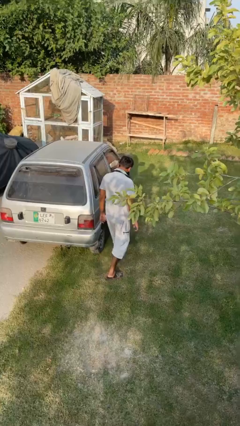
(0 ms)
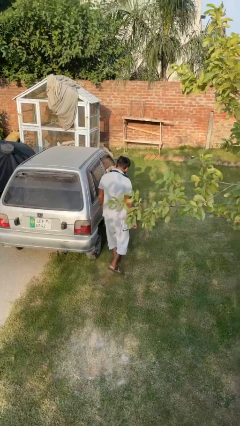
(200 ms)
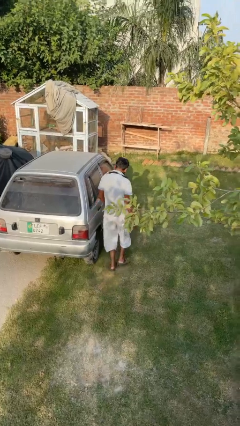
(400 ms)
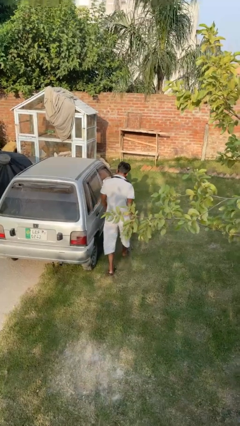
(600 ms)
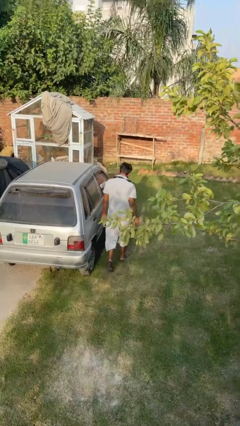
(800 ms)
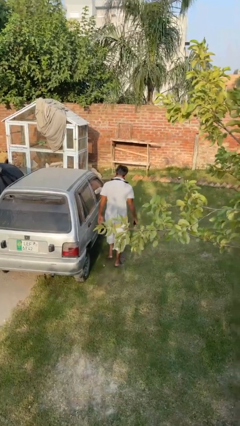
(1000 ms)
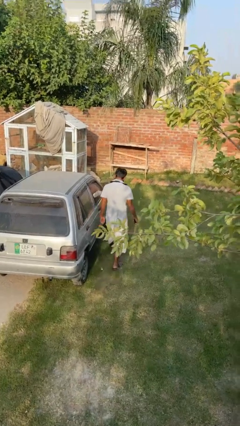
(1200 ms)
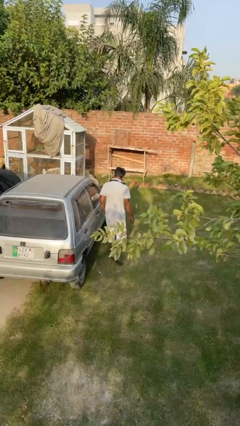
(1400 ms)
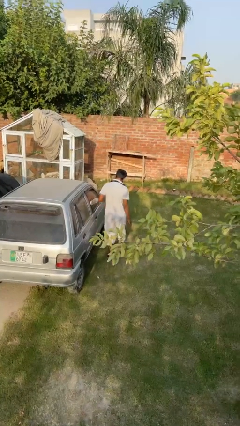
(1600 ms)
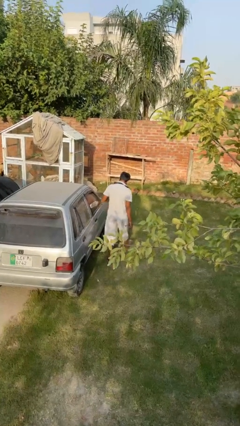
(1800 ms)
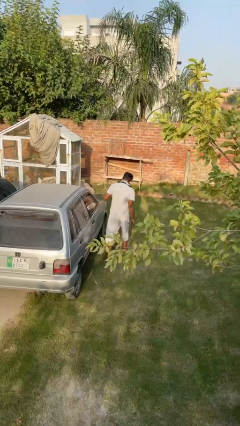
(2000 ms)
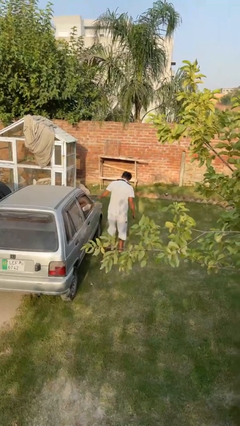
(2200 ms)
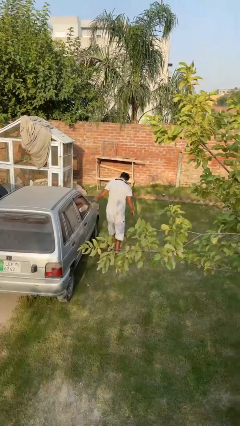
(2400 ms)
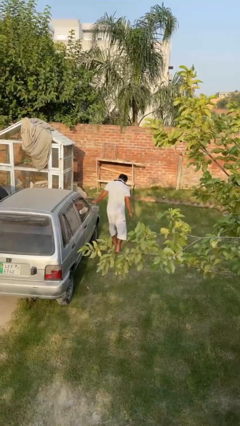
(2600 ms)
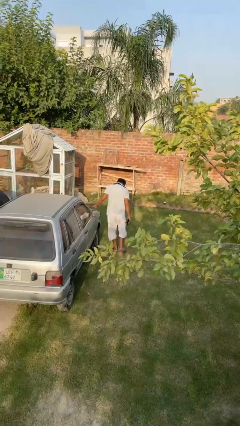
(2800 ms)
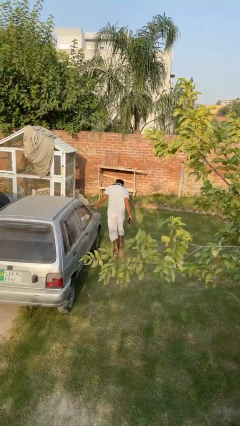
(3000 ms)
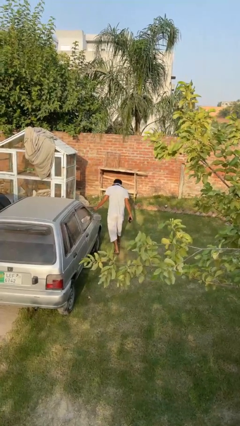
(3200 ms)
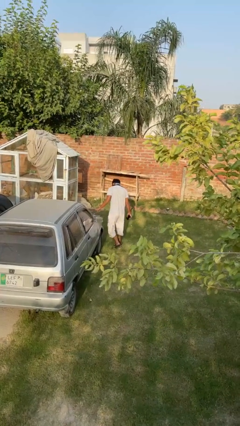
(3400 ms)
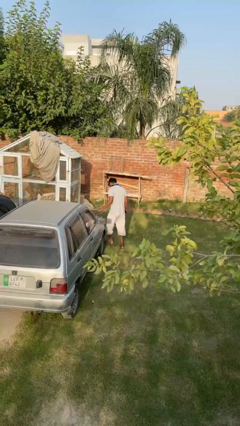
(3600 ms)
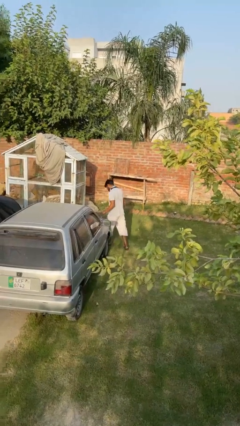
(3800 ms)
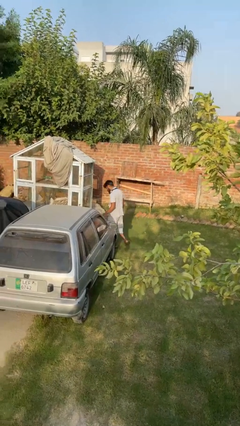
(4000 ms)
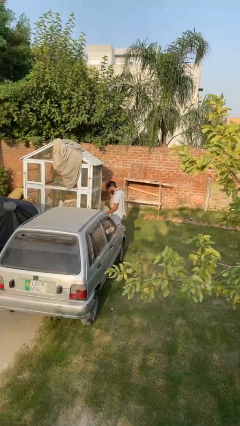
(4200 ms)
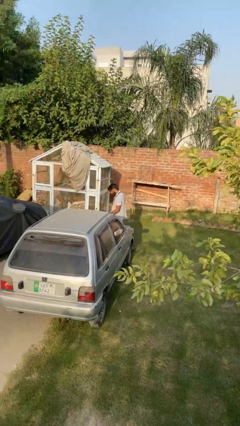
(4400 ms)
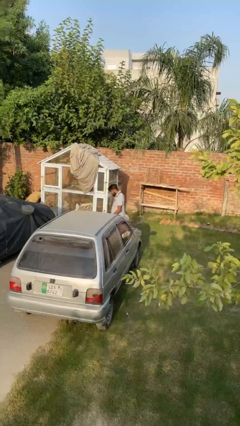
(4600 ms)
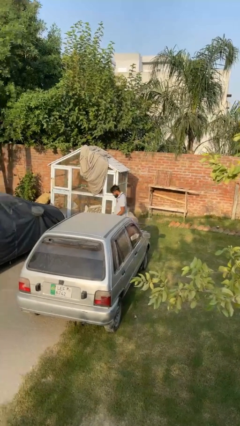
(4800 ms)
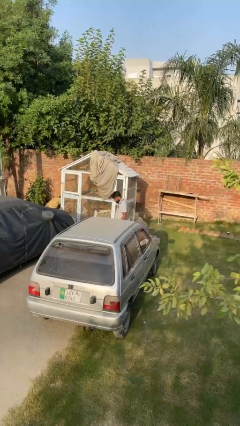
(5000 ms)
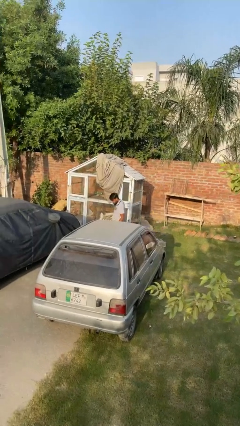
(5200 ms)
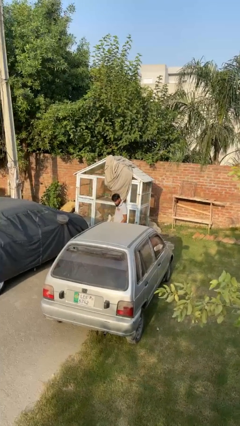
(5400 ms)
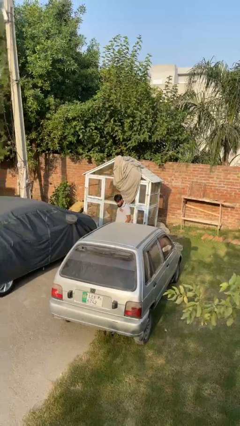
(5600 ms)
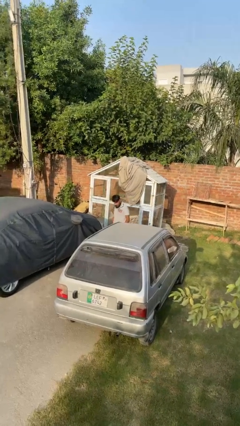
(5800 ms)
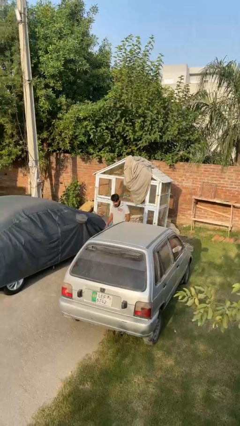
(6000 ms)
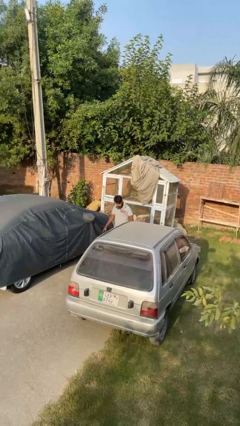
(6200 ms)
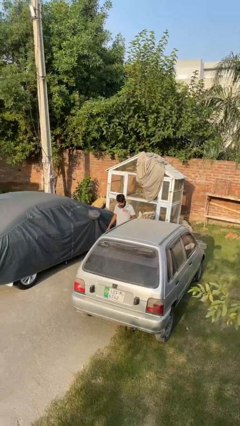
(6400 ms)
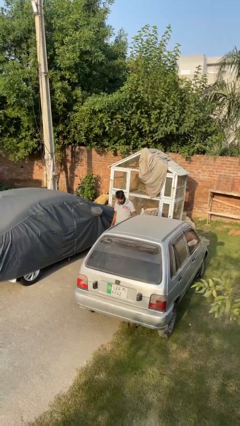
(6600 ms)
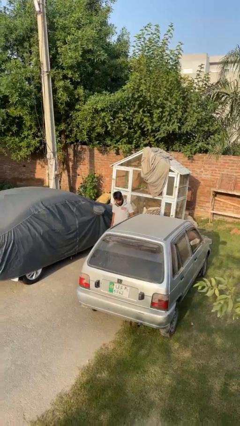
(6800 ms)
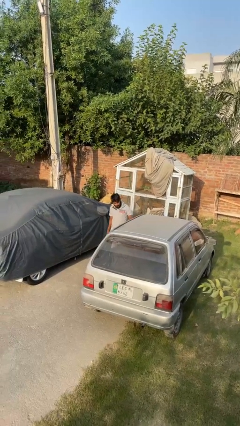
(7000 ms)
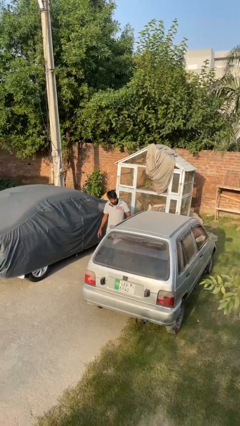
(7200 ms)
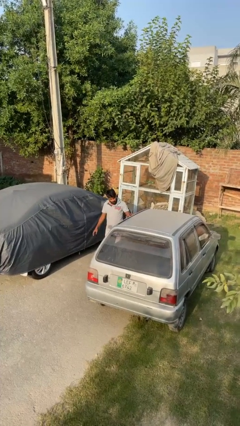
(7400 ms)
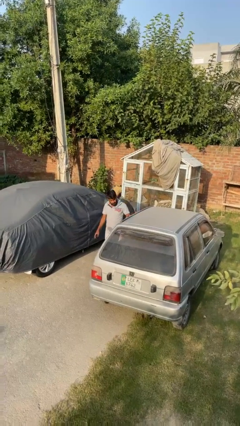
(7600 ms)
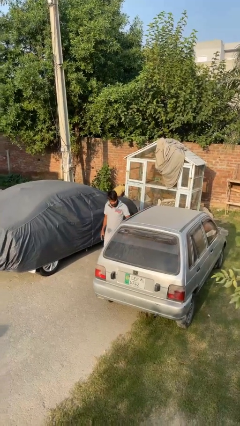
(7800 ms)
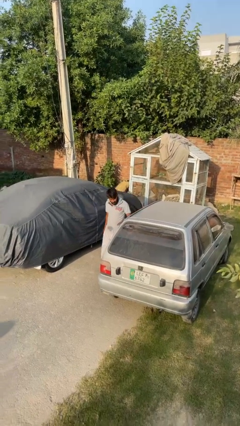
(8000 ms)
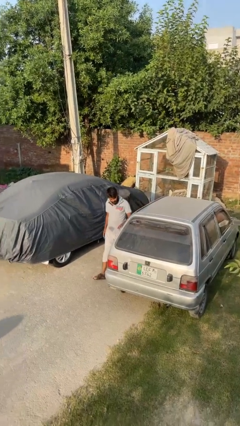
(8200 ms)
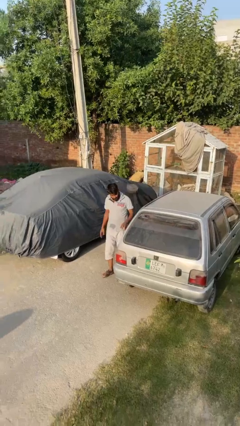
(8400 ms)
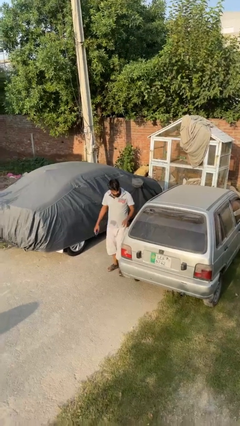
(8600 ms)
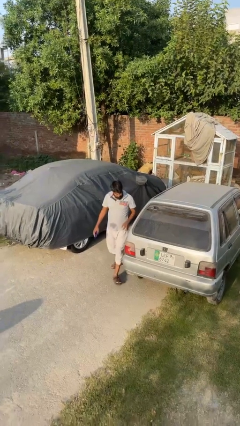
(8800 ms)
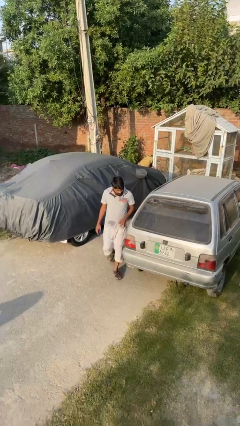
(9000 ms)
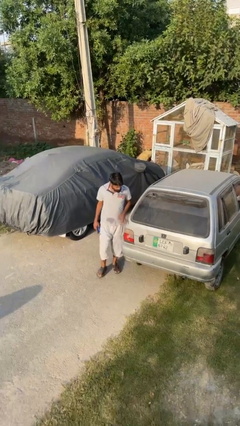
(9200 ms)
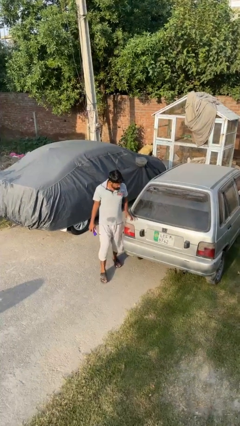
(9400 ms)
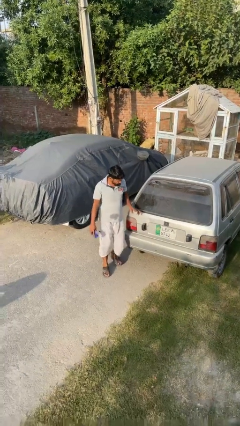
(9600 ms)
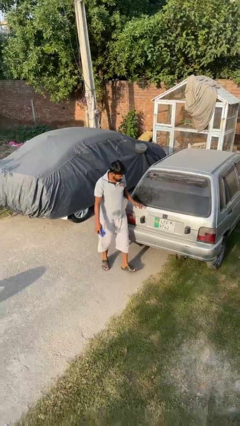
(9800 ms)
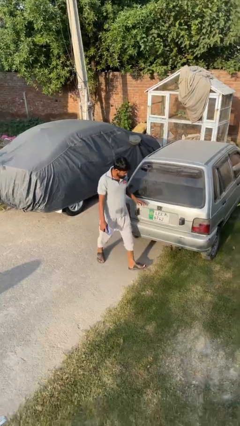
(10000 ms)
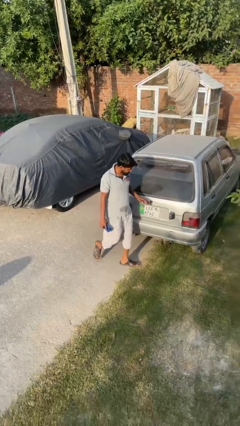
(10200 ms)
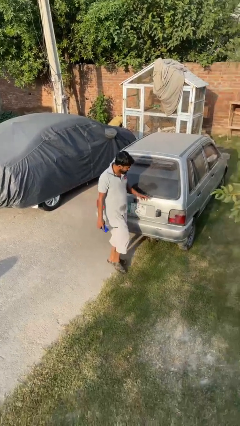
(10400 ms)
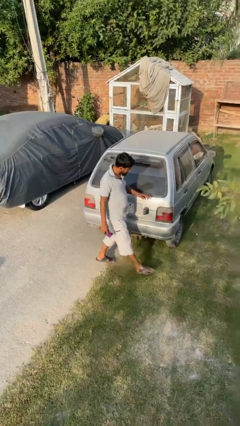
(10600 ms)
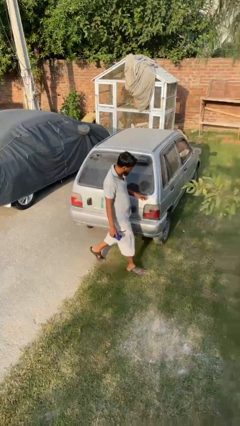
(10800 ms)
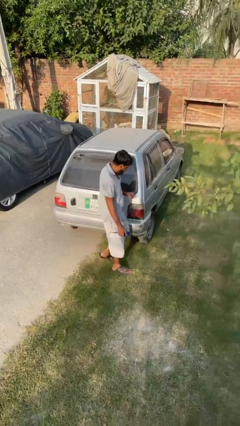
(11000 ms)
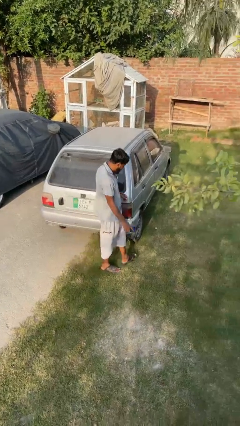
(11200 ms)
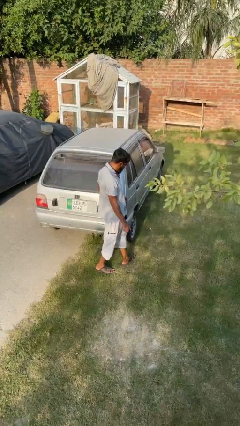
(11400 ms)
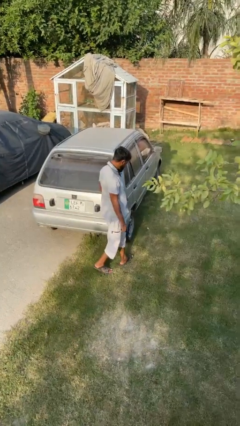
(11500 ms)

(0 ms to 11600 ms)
person walks around car

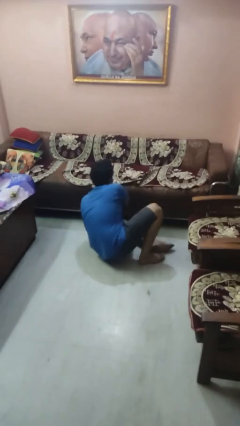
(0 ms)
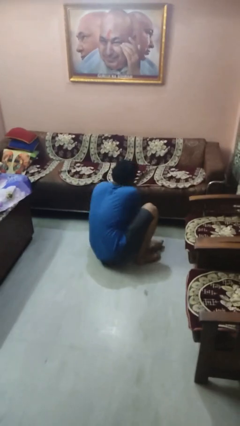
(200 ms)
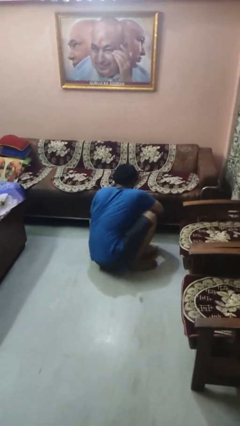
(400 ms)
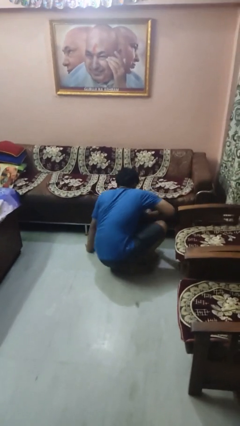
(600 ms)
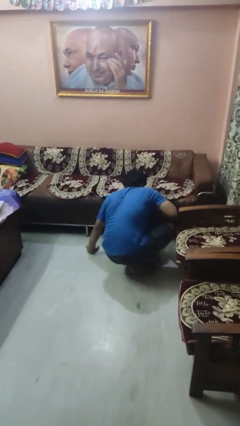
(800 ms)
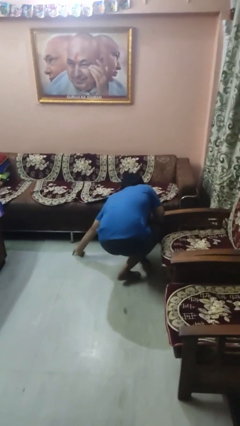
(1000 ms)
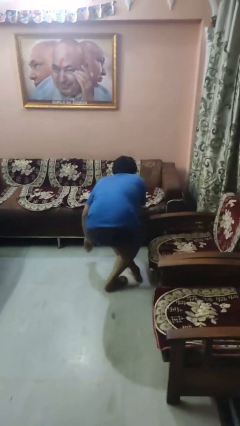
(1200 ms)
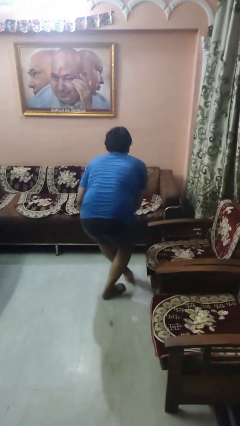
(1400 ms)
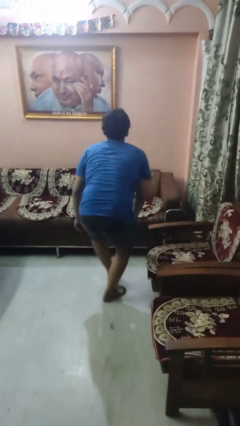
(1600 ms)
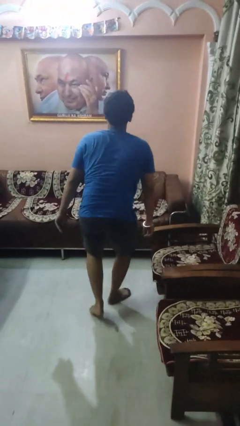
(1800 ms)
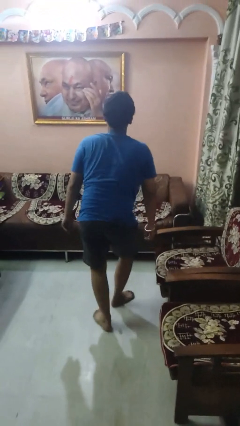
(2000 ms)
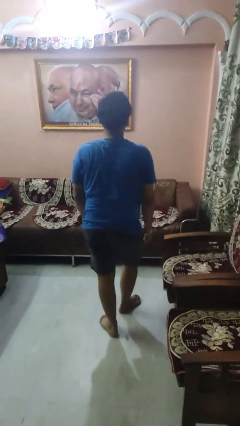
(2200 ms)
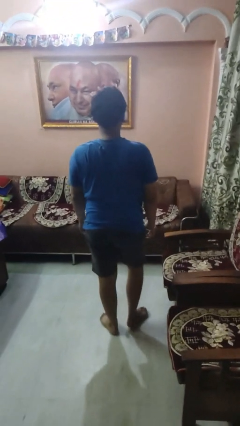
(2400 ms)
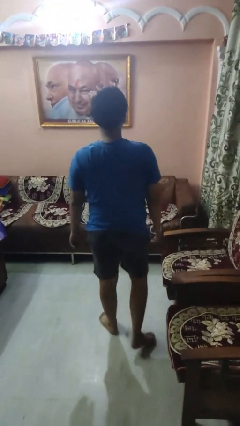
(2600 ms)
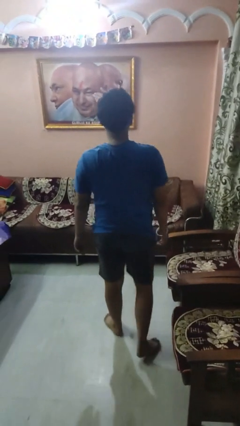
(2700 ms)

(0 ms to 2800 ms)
person stands up from floor

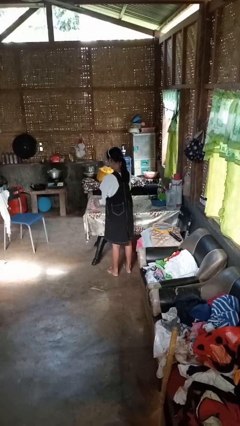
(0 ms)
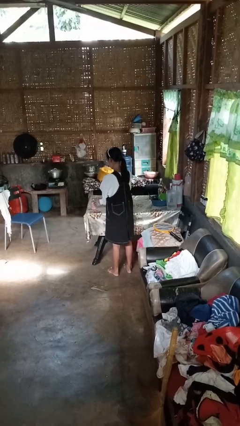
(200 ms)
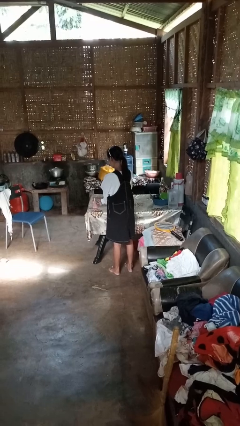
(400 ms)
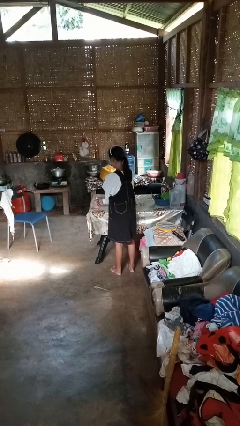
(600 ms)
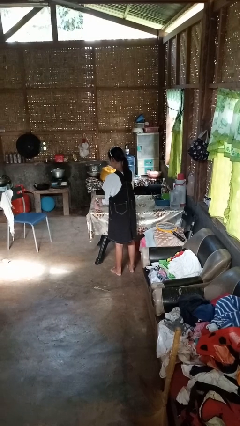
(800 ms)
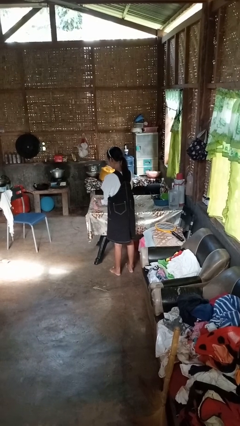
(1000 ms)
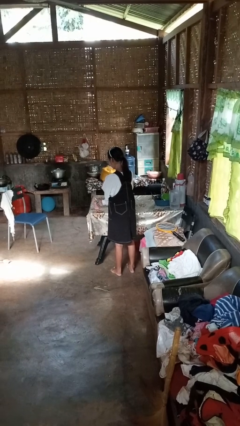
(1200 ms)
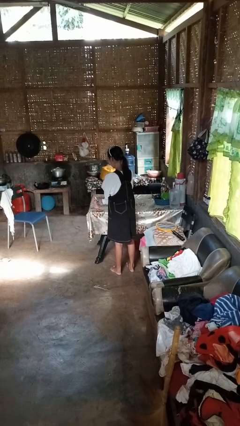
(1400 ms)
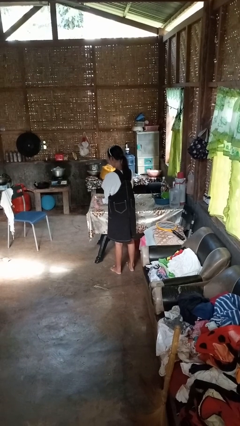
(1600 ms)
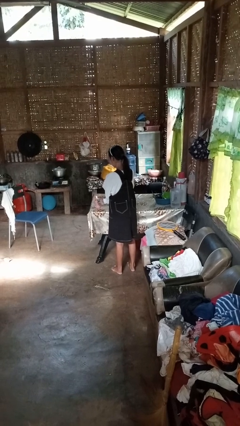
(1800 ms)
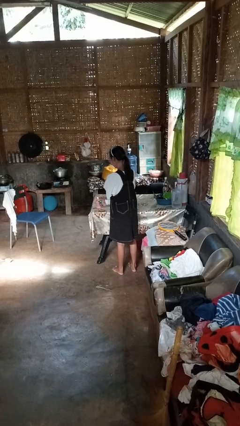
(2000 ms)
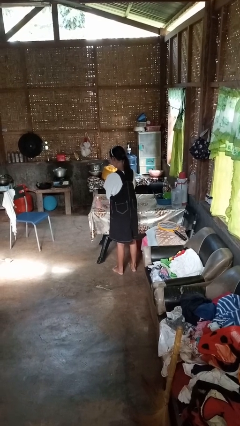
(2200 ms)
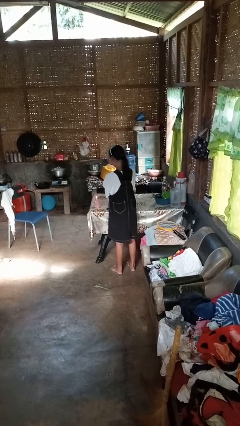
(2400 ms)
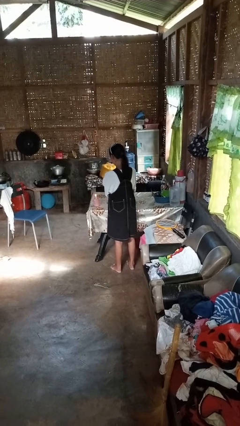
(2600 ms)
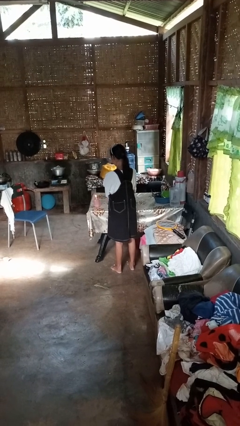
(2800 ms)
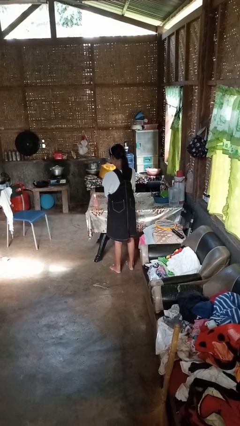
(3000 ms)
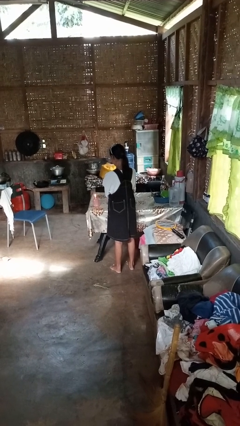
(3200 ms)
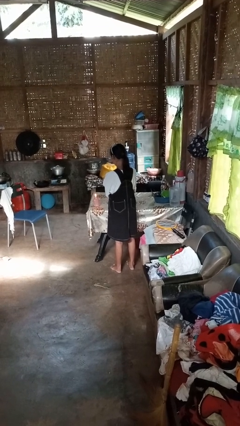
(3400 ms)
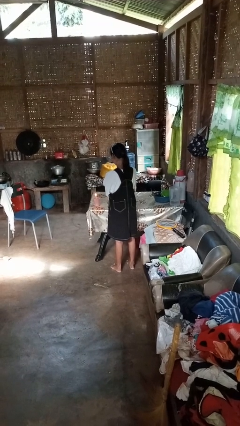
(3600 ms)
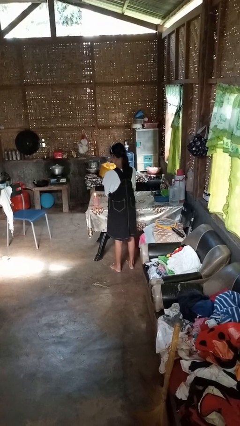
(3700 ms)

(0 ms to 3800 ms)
person lights candle
